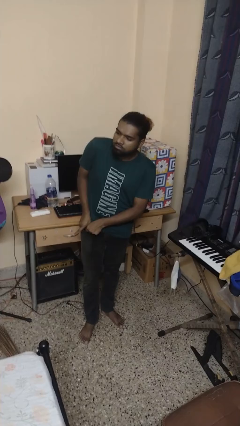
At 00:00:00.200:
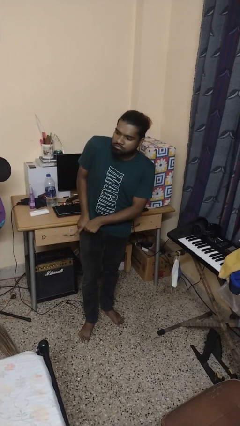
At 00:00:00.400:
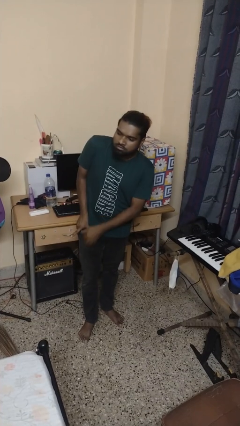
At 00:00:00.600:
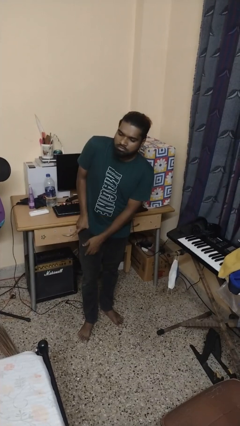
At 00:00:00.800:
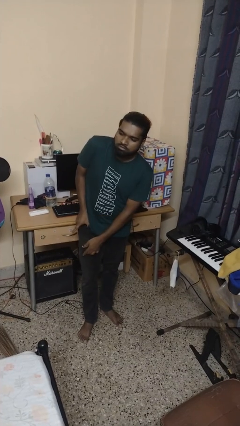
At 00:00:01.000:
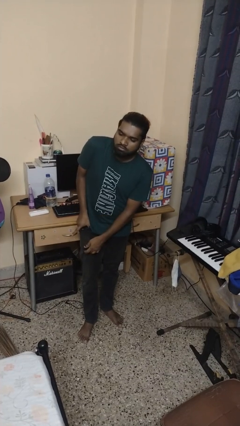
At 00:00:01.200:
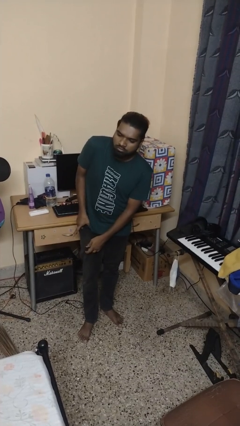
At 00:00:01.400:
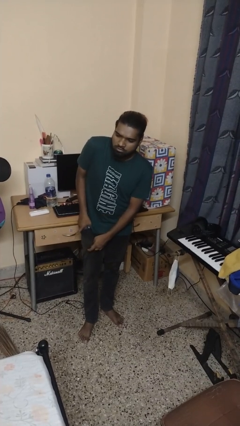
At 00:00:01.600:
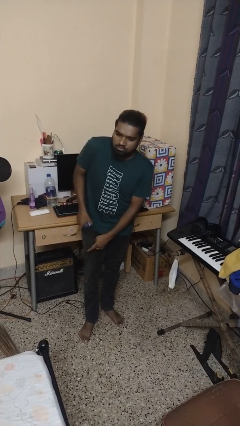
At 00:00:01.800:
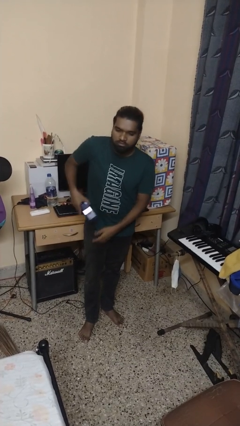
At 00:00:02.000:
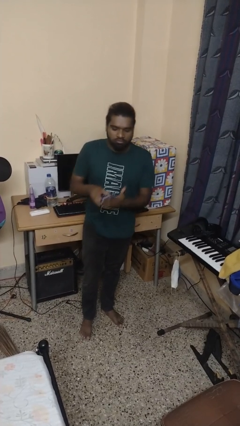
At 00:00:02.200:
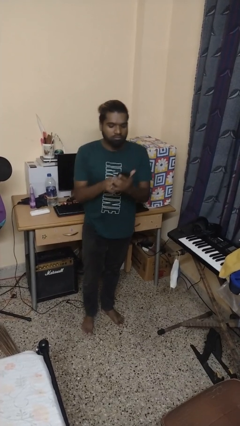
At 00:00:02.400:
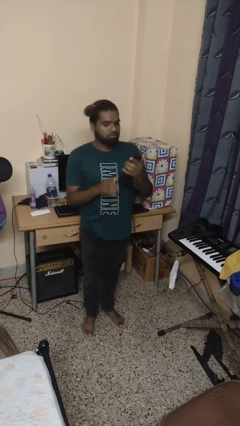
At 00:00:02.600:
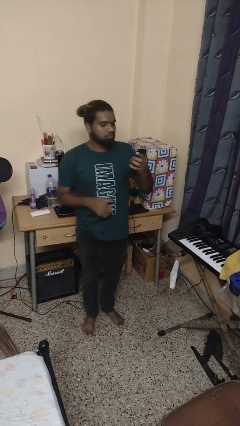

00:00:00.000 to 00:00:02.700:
person takes phone from pocket

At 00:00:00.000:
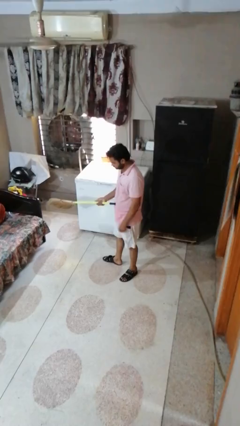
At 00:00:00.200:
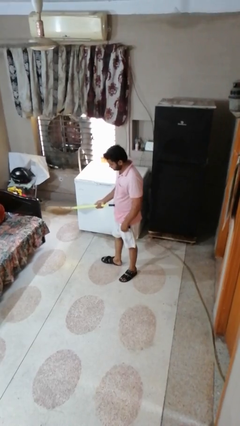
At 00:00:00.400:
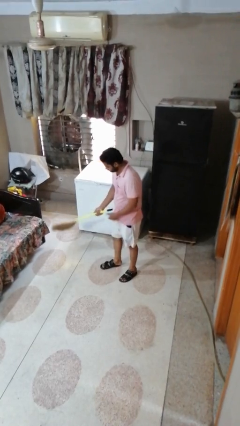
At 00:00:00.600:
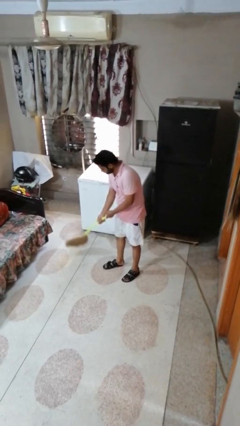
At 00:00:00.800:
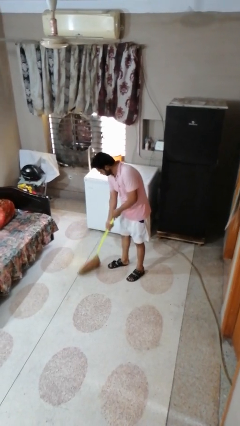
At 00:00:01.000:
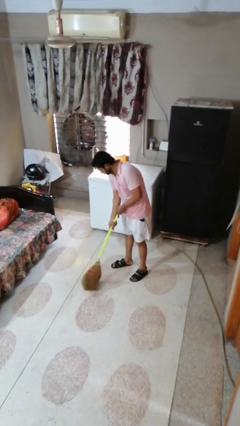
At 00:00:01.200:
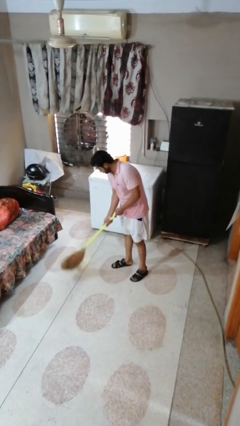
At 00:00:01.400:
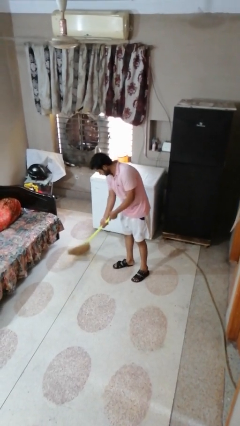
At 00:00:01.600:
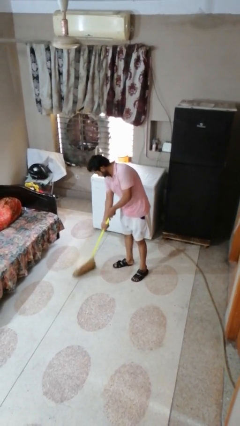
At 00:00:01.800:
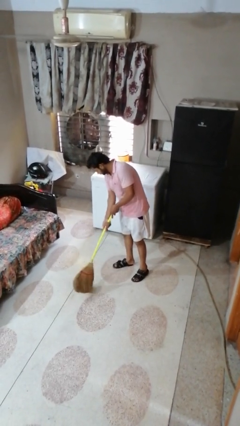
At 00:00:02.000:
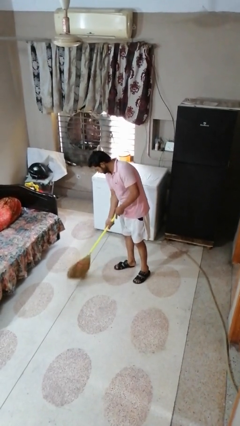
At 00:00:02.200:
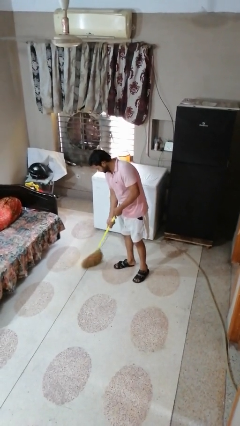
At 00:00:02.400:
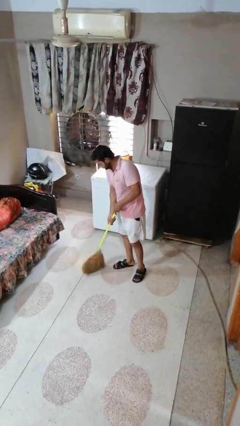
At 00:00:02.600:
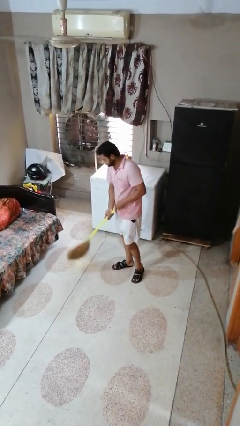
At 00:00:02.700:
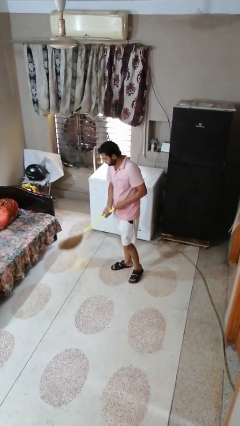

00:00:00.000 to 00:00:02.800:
person sweeps floor

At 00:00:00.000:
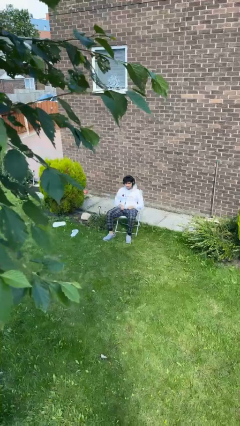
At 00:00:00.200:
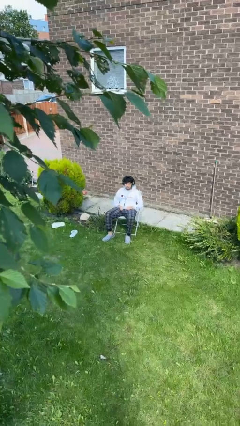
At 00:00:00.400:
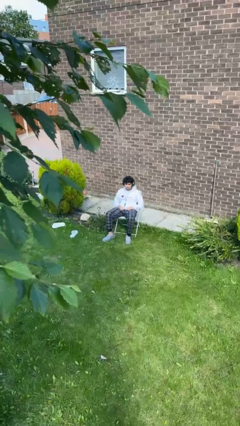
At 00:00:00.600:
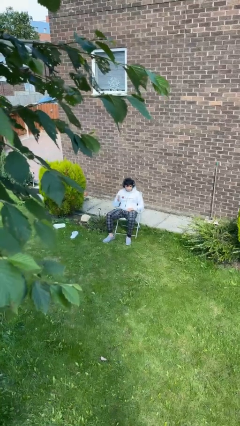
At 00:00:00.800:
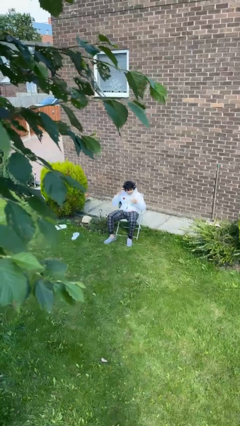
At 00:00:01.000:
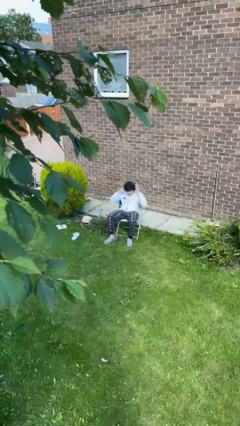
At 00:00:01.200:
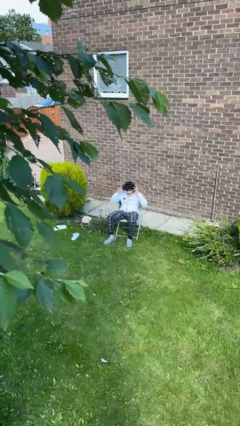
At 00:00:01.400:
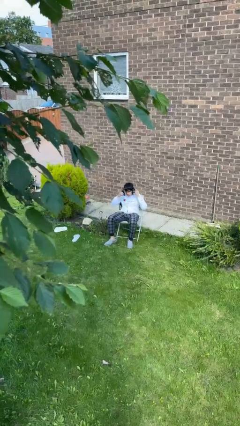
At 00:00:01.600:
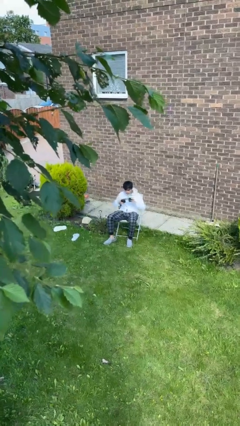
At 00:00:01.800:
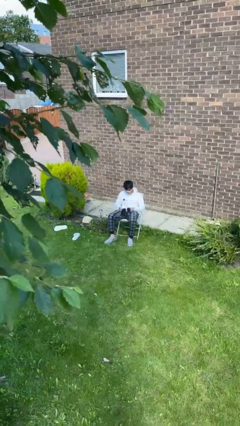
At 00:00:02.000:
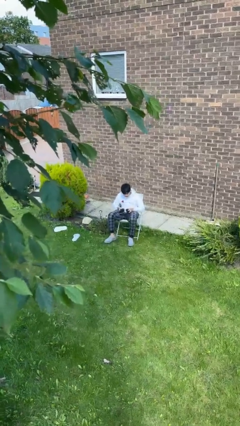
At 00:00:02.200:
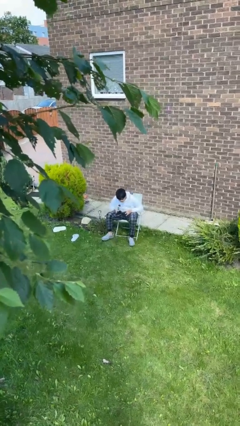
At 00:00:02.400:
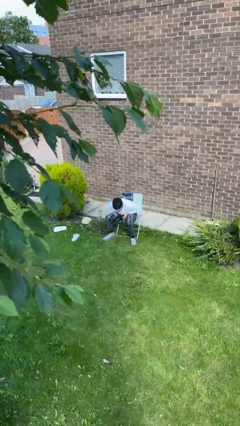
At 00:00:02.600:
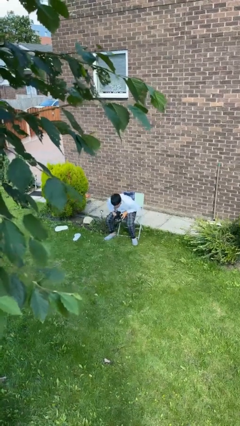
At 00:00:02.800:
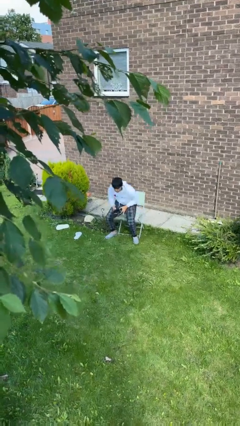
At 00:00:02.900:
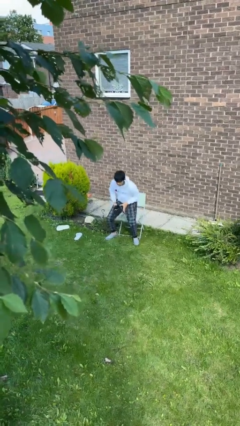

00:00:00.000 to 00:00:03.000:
person takes off headphones

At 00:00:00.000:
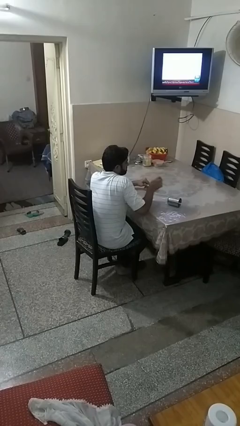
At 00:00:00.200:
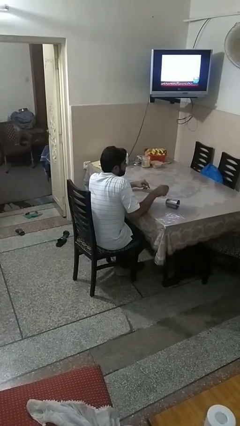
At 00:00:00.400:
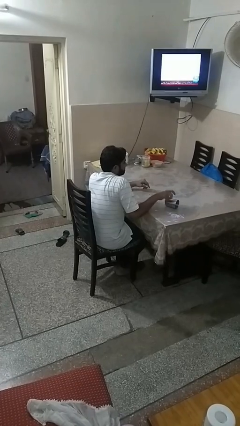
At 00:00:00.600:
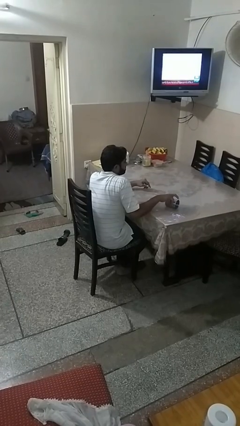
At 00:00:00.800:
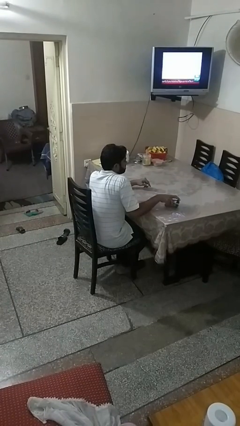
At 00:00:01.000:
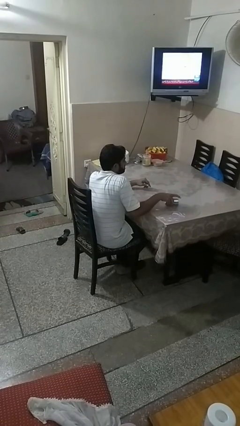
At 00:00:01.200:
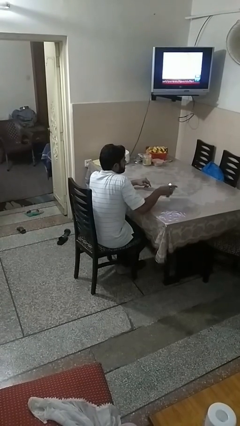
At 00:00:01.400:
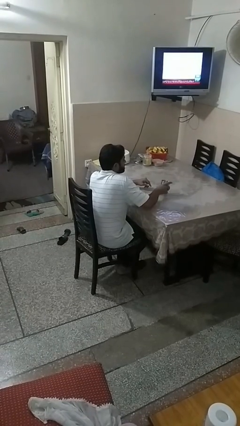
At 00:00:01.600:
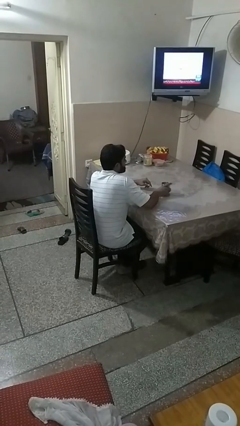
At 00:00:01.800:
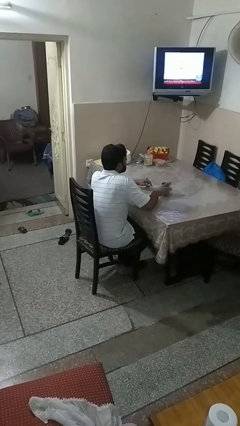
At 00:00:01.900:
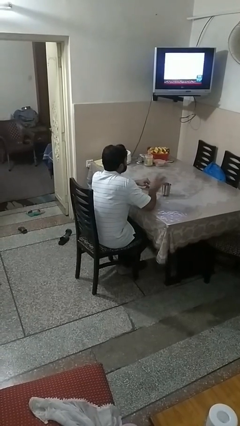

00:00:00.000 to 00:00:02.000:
person sets upright glass

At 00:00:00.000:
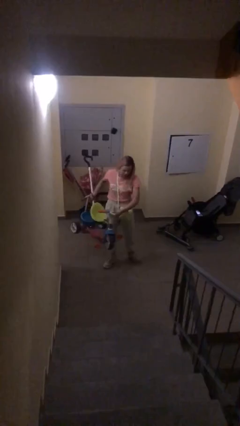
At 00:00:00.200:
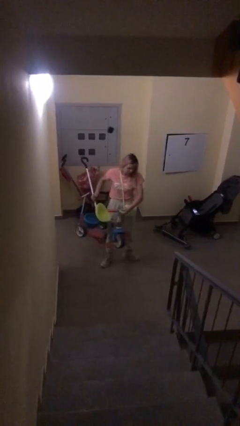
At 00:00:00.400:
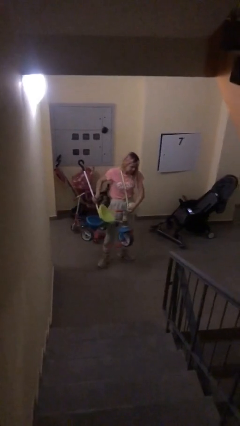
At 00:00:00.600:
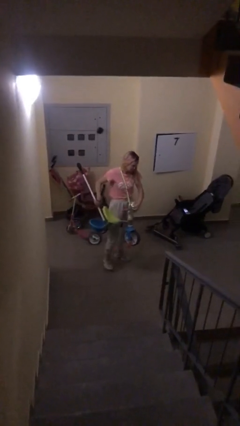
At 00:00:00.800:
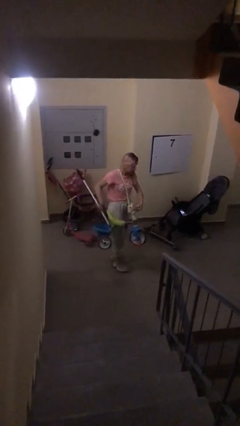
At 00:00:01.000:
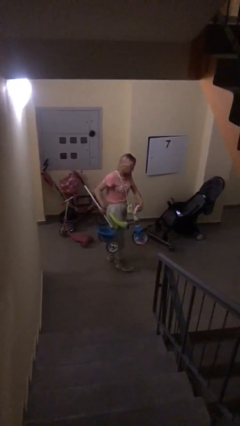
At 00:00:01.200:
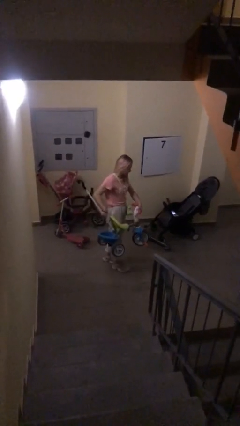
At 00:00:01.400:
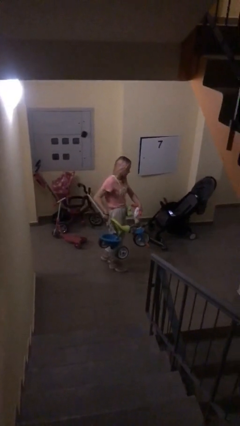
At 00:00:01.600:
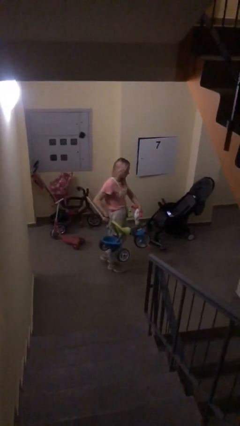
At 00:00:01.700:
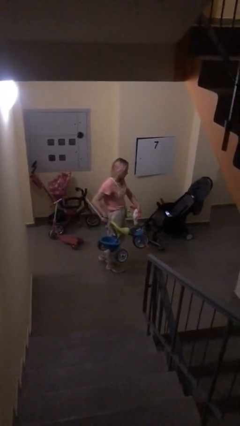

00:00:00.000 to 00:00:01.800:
person carries bicycle

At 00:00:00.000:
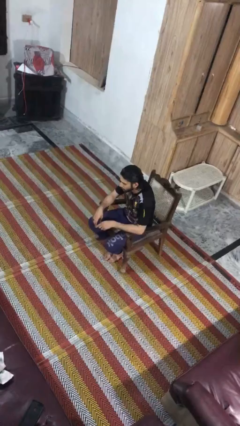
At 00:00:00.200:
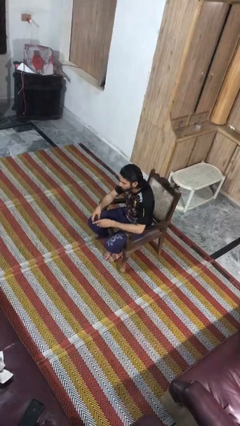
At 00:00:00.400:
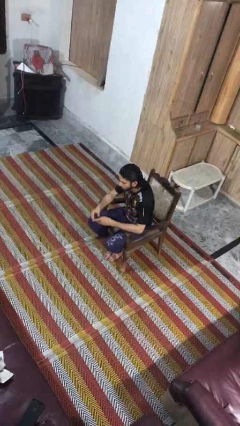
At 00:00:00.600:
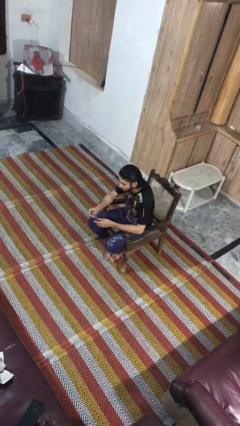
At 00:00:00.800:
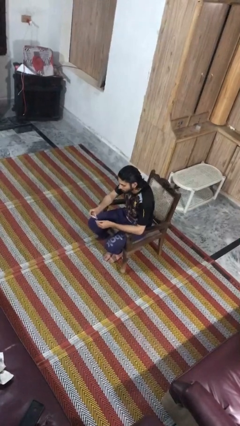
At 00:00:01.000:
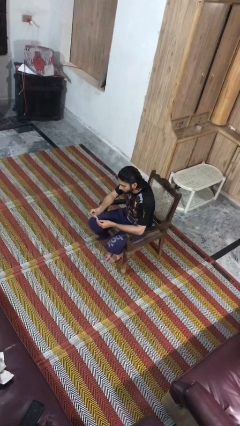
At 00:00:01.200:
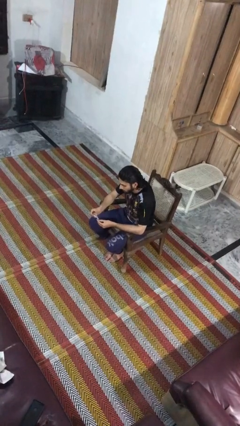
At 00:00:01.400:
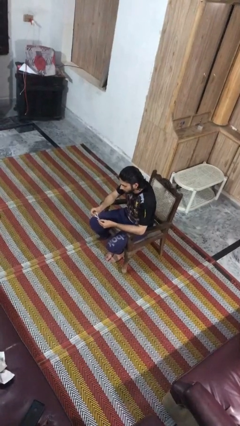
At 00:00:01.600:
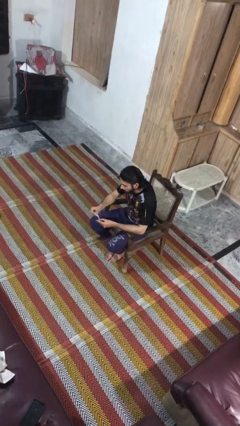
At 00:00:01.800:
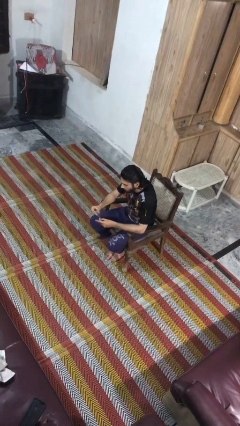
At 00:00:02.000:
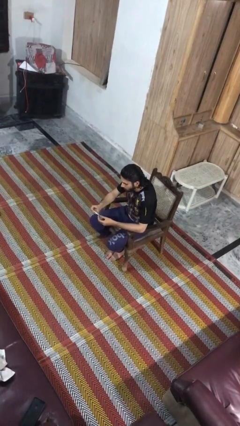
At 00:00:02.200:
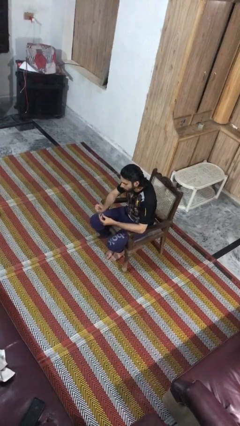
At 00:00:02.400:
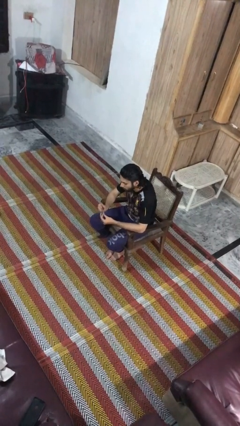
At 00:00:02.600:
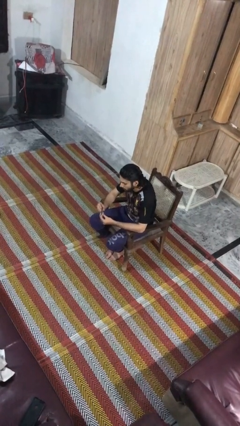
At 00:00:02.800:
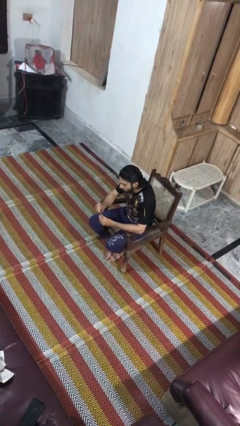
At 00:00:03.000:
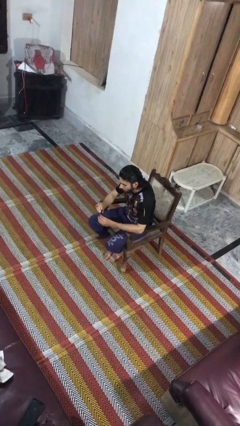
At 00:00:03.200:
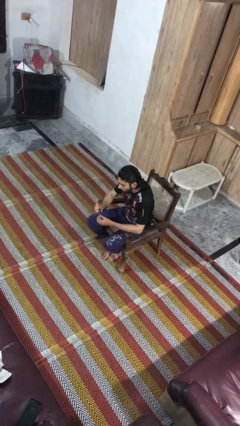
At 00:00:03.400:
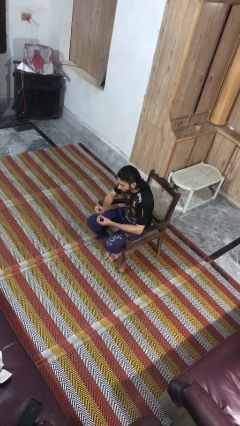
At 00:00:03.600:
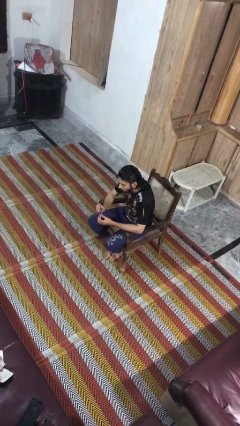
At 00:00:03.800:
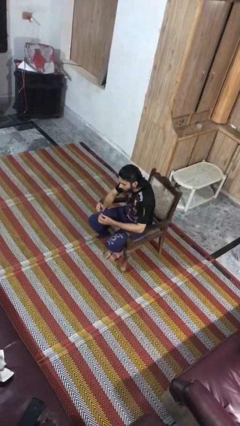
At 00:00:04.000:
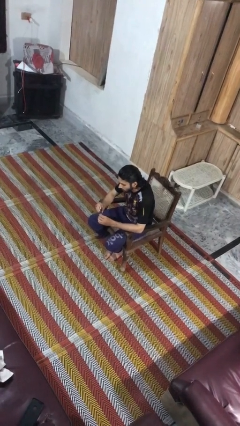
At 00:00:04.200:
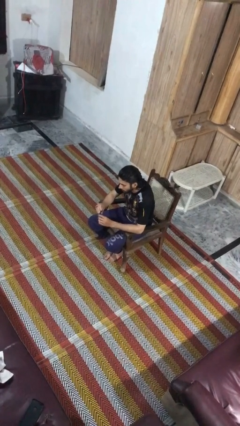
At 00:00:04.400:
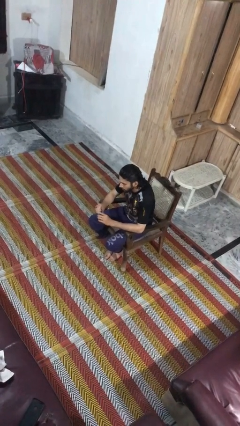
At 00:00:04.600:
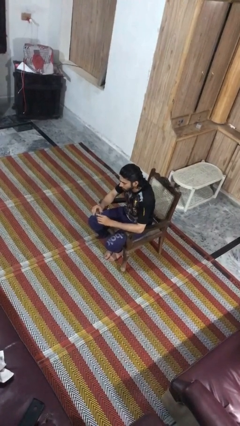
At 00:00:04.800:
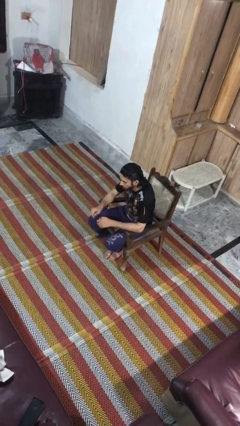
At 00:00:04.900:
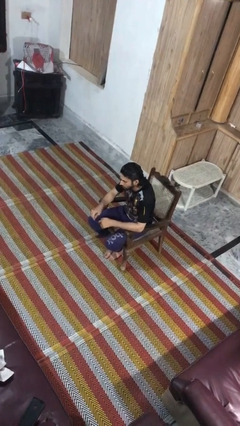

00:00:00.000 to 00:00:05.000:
person clips fingernails
